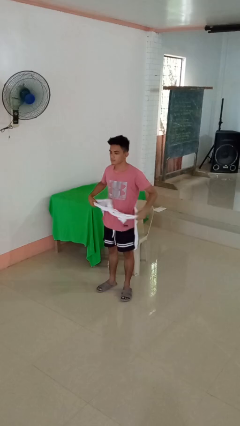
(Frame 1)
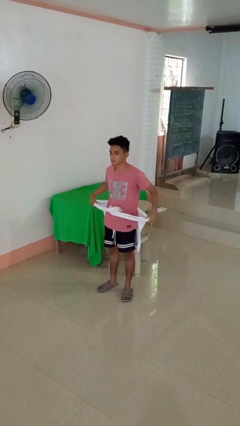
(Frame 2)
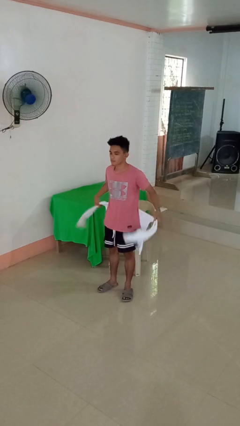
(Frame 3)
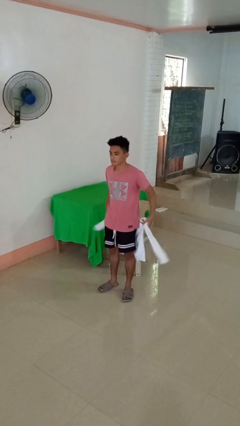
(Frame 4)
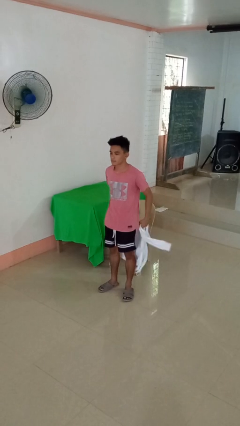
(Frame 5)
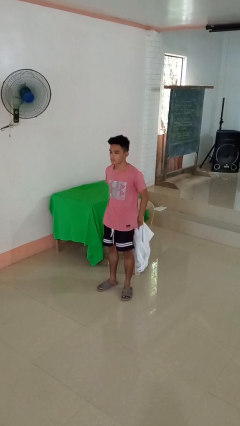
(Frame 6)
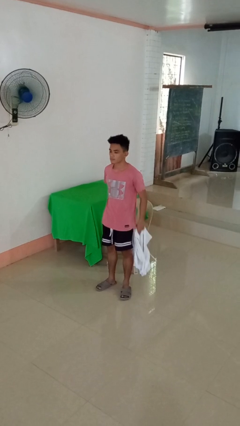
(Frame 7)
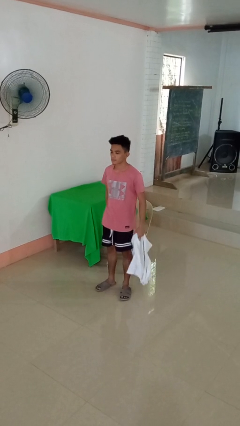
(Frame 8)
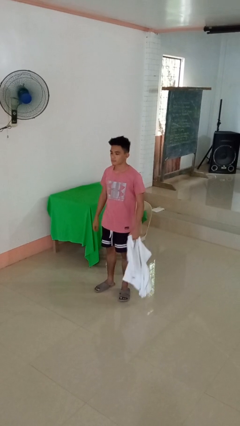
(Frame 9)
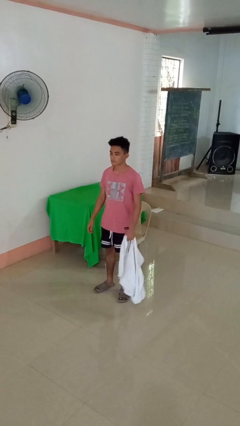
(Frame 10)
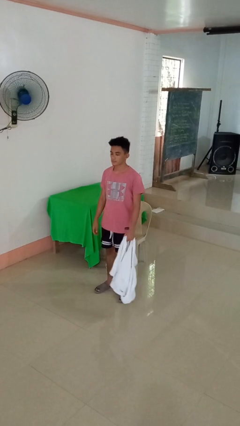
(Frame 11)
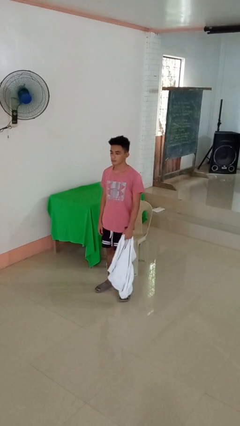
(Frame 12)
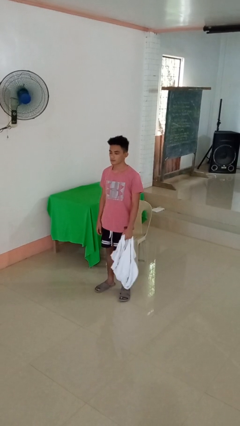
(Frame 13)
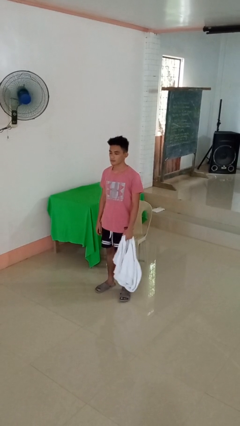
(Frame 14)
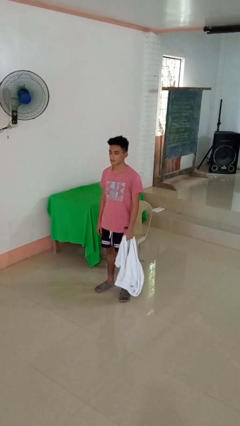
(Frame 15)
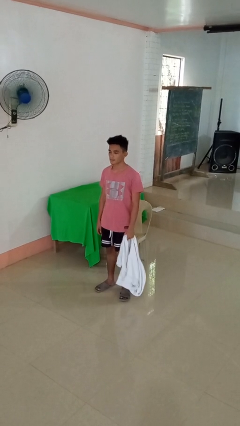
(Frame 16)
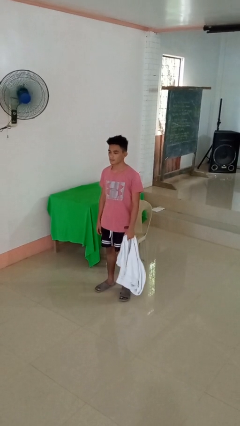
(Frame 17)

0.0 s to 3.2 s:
person unties jacket around waist

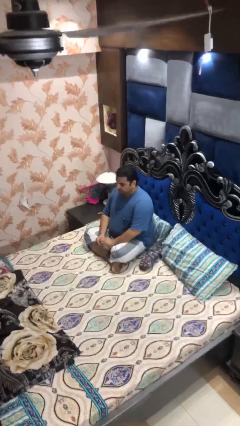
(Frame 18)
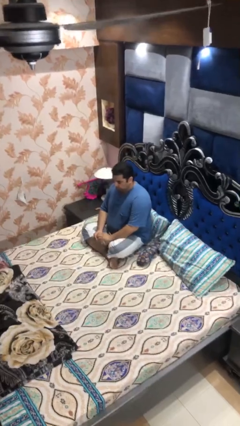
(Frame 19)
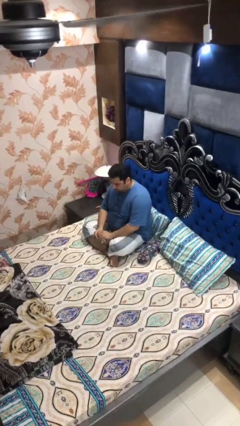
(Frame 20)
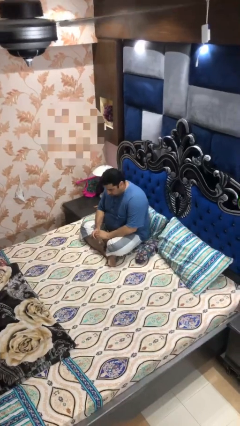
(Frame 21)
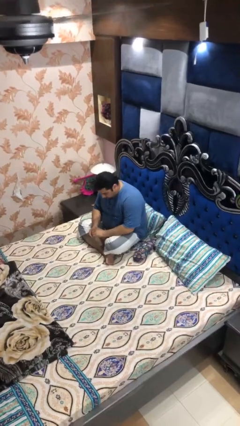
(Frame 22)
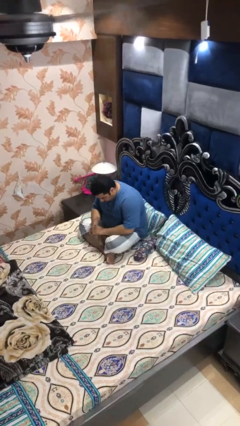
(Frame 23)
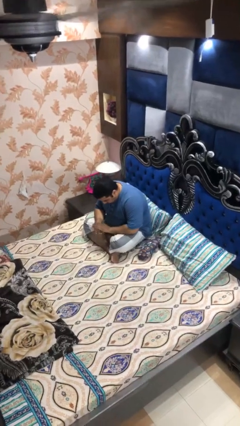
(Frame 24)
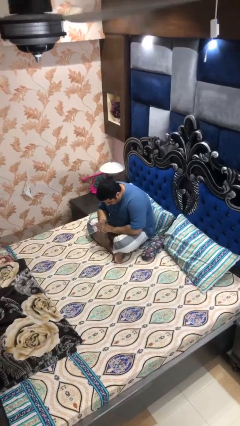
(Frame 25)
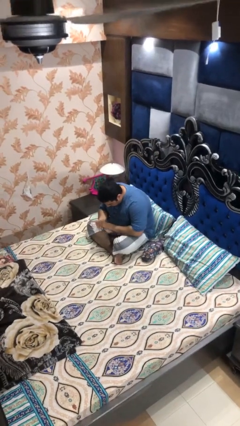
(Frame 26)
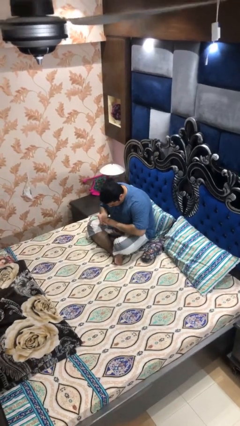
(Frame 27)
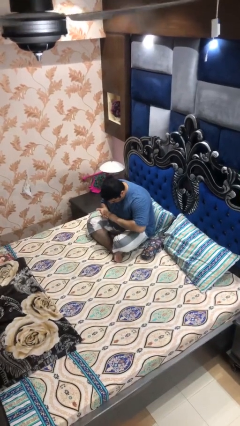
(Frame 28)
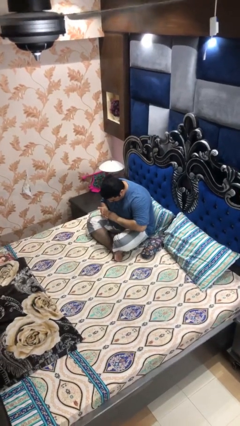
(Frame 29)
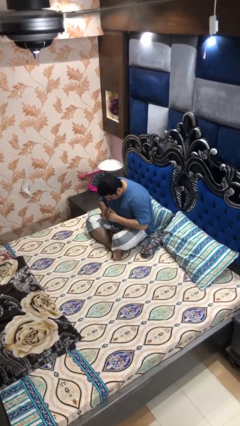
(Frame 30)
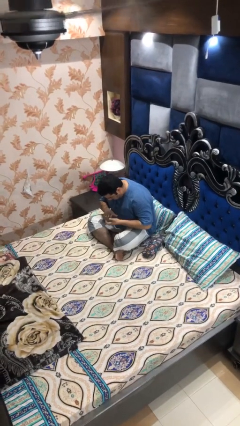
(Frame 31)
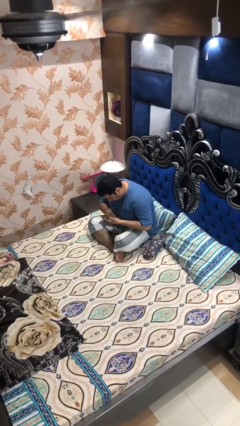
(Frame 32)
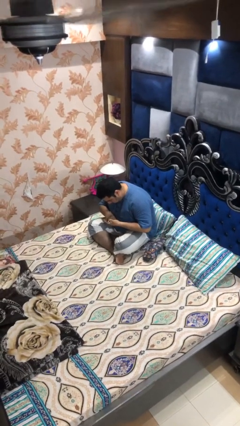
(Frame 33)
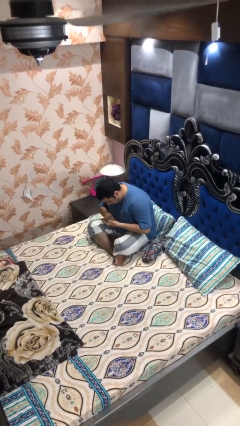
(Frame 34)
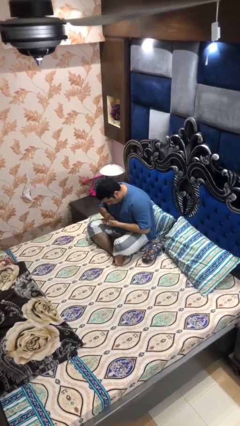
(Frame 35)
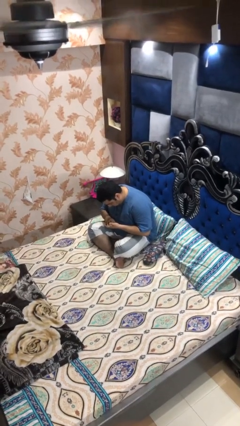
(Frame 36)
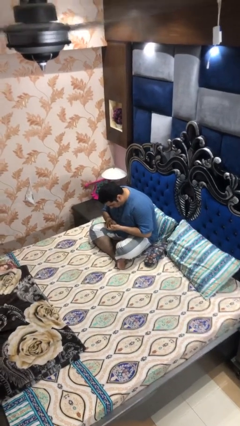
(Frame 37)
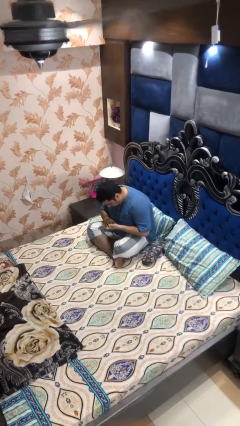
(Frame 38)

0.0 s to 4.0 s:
person looks at hands in lap

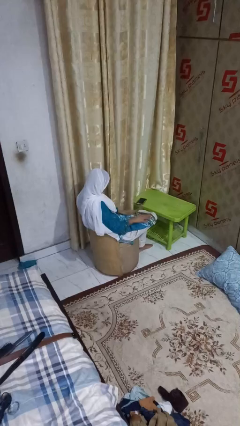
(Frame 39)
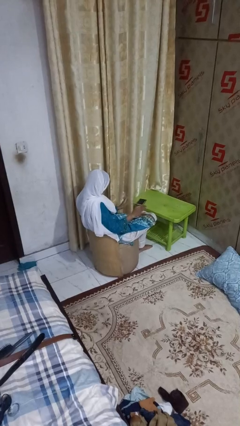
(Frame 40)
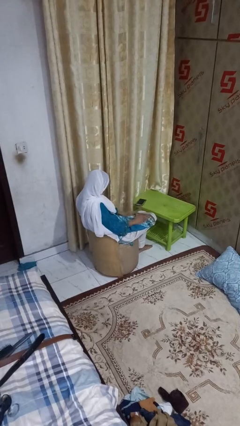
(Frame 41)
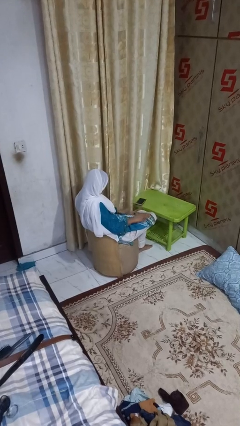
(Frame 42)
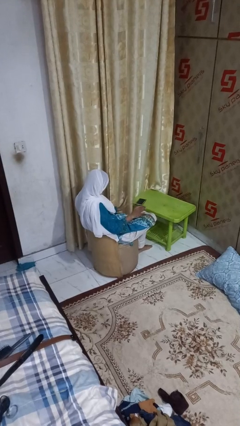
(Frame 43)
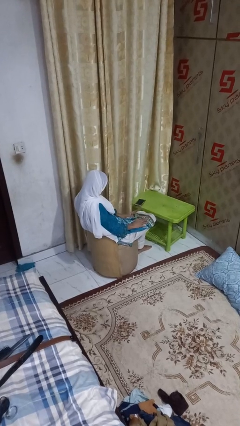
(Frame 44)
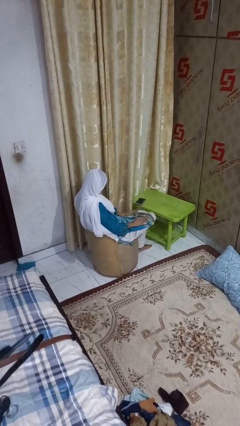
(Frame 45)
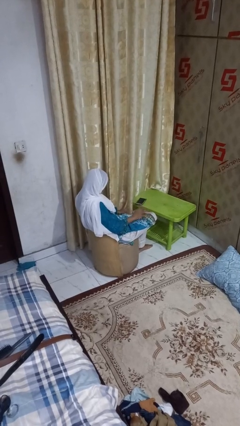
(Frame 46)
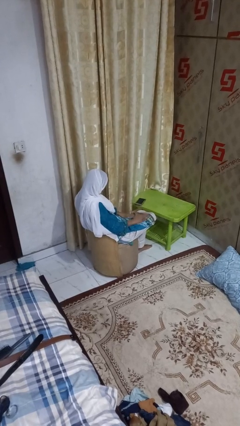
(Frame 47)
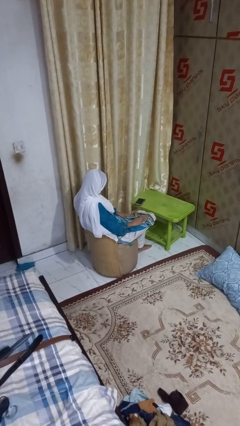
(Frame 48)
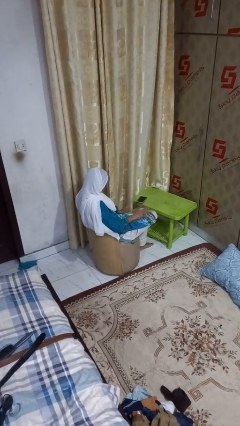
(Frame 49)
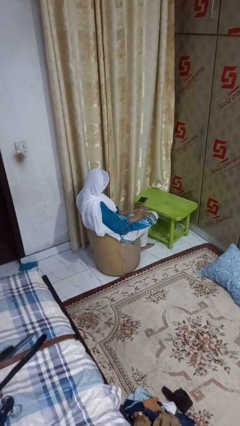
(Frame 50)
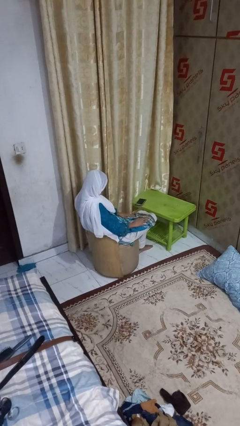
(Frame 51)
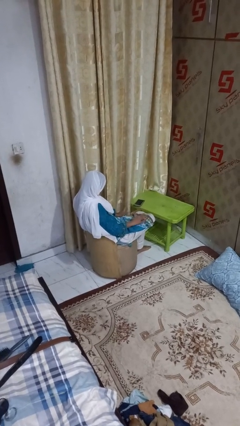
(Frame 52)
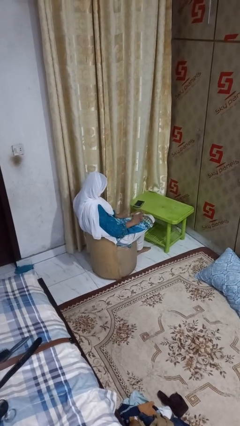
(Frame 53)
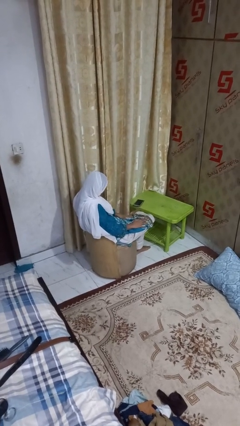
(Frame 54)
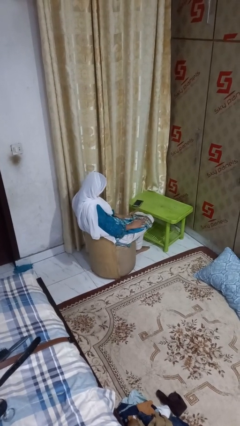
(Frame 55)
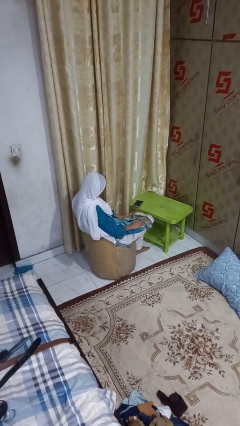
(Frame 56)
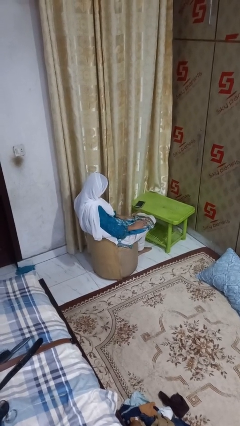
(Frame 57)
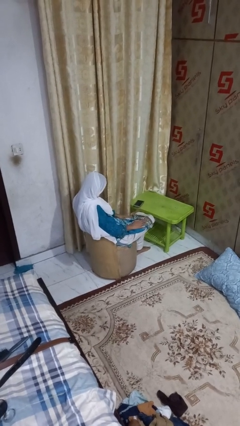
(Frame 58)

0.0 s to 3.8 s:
person slaps hands on thighs

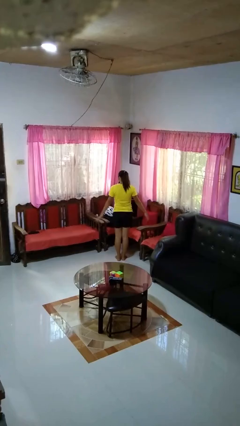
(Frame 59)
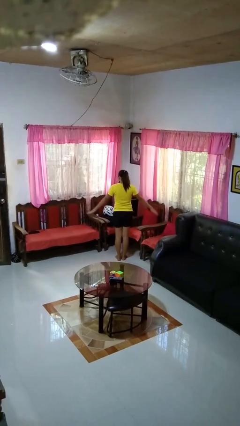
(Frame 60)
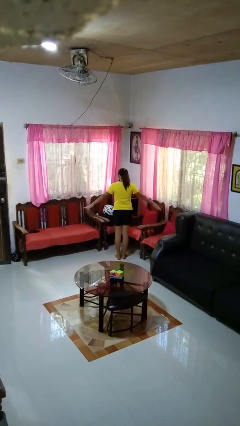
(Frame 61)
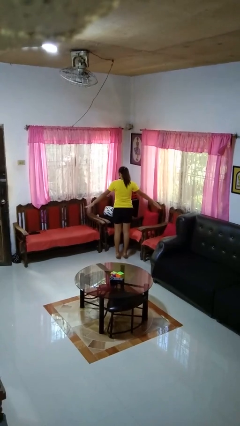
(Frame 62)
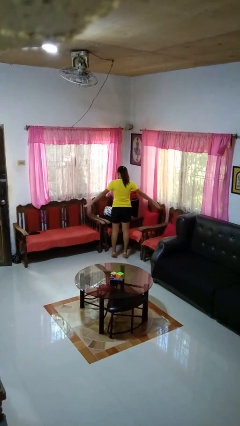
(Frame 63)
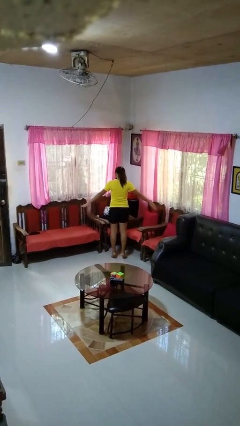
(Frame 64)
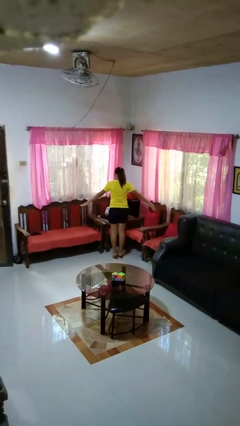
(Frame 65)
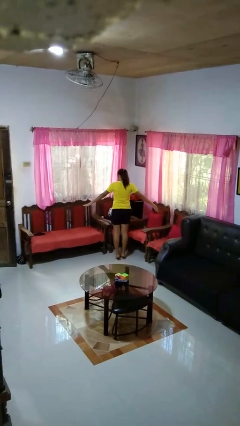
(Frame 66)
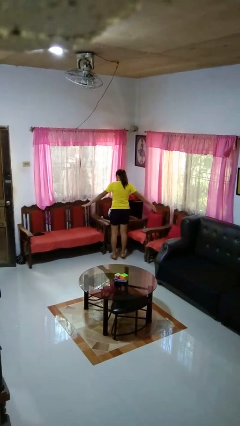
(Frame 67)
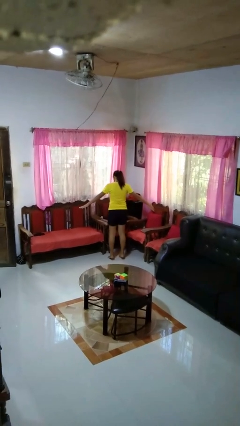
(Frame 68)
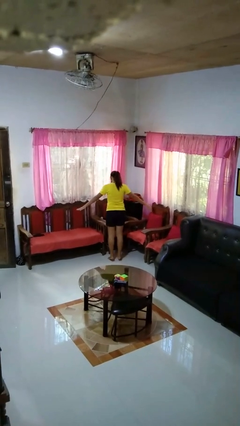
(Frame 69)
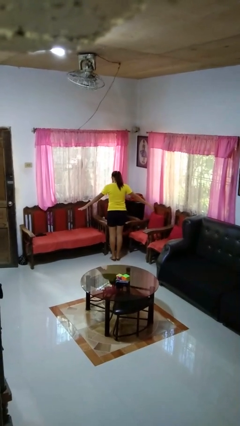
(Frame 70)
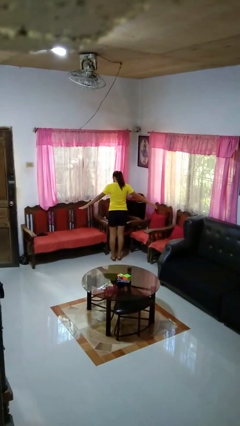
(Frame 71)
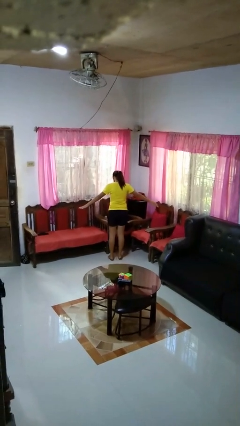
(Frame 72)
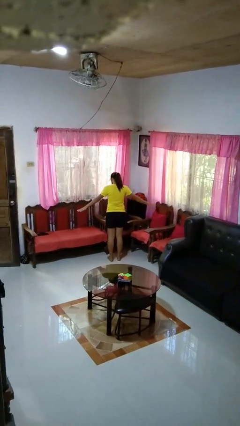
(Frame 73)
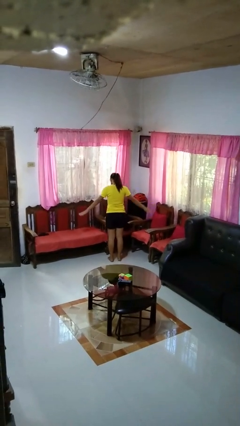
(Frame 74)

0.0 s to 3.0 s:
person walks tiptoe

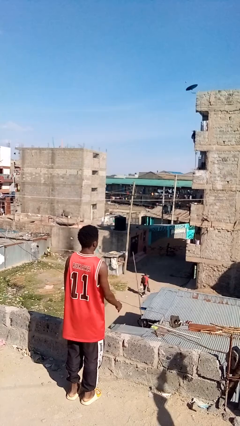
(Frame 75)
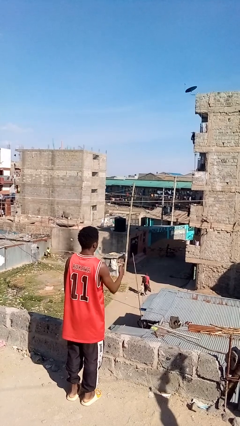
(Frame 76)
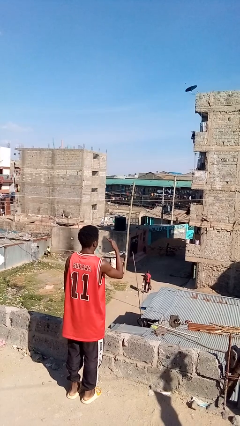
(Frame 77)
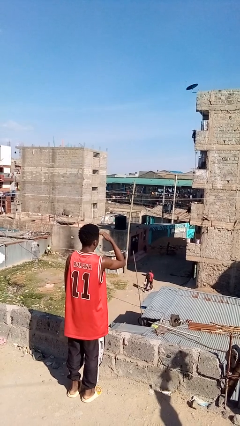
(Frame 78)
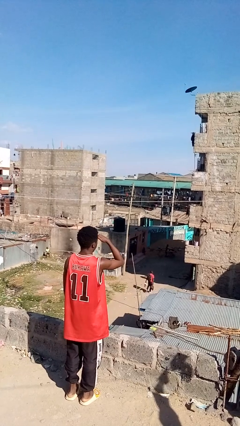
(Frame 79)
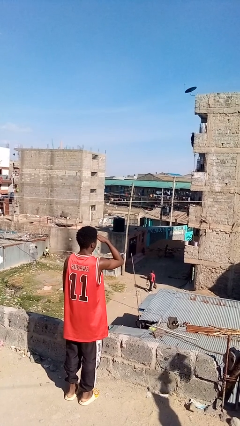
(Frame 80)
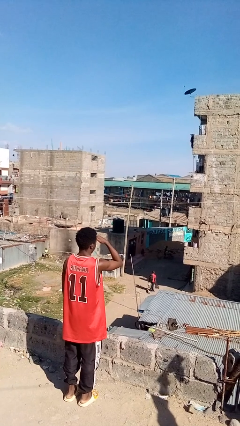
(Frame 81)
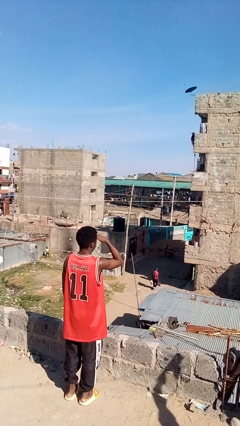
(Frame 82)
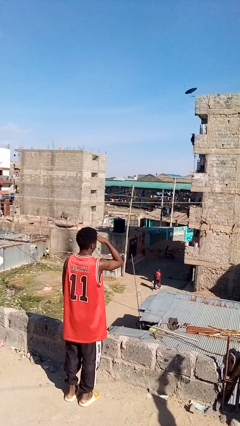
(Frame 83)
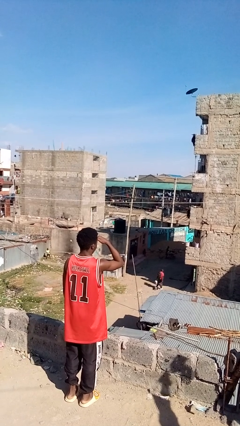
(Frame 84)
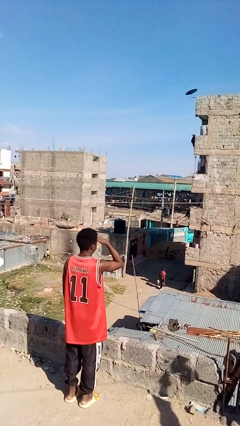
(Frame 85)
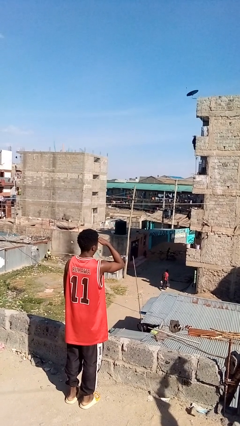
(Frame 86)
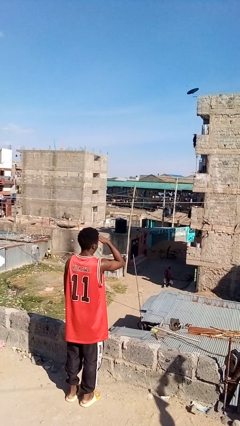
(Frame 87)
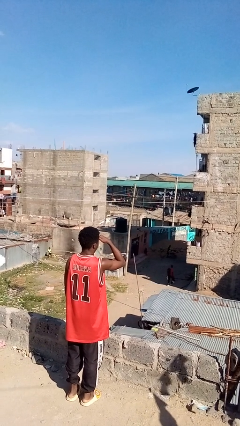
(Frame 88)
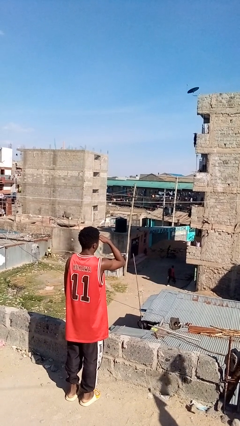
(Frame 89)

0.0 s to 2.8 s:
person shades eyes

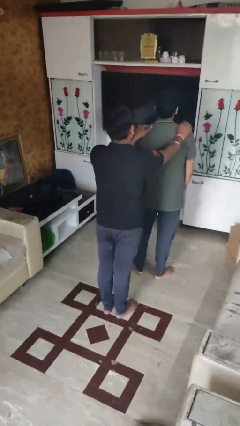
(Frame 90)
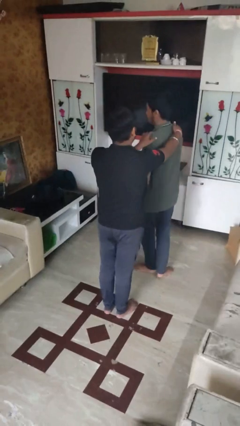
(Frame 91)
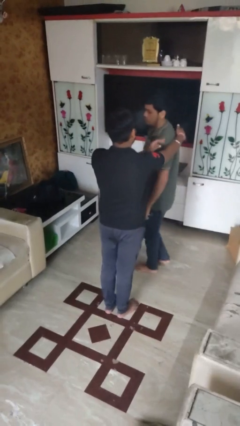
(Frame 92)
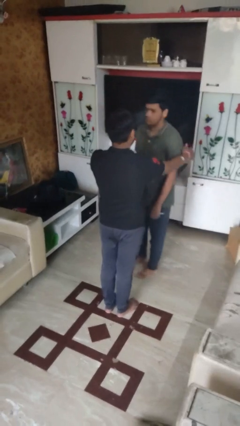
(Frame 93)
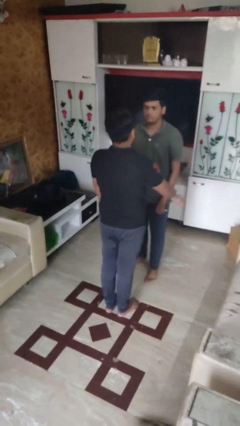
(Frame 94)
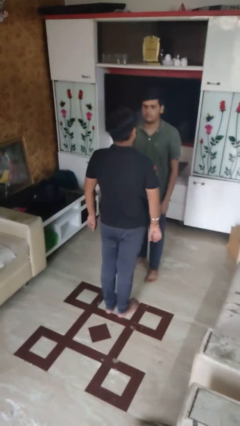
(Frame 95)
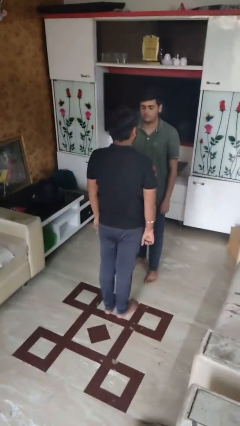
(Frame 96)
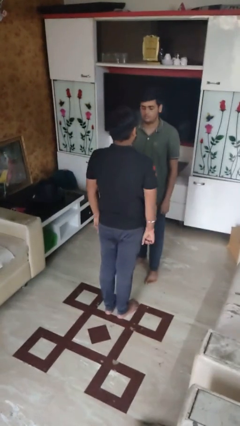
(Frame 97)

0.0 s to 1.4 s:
person spins person around
